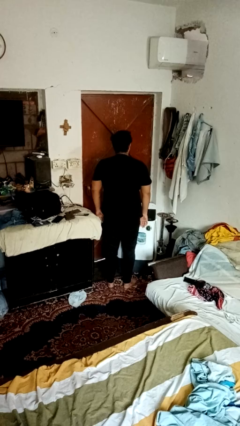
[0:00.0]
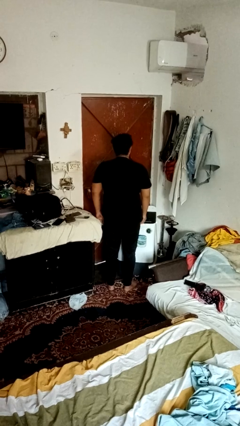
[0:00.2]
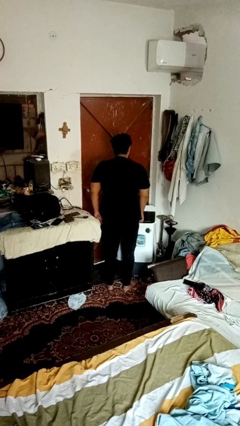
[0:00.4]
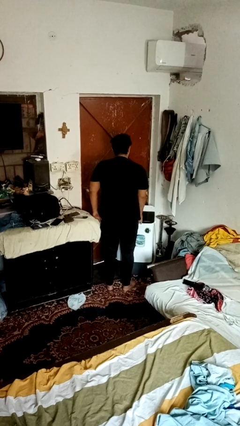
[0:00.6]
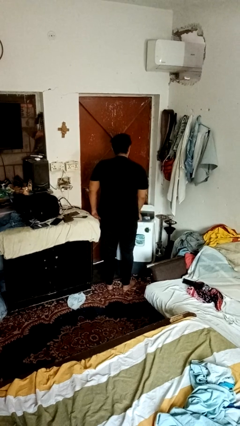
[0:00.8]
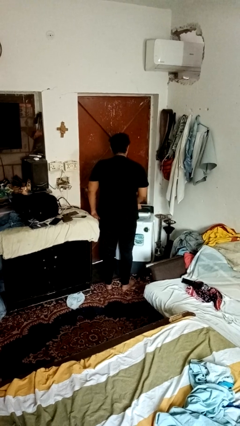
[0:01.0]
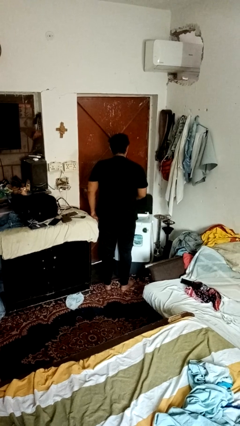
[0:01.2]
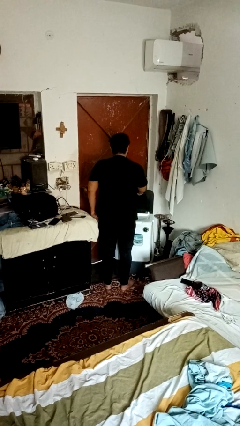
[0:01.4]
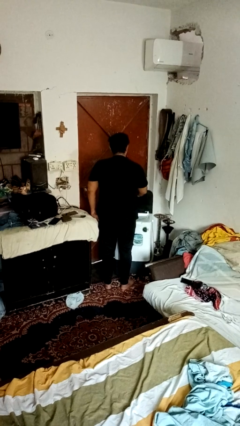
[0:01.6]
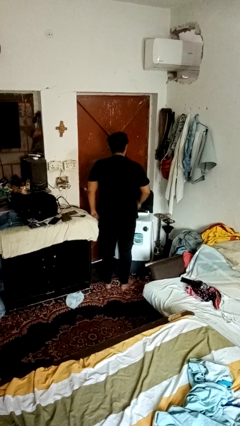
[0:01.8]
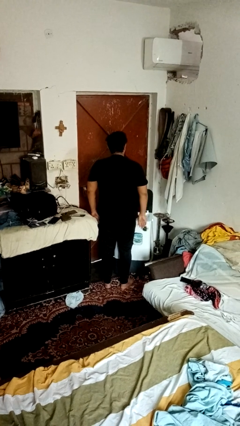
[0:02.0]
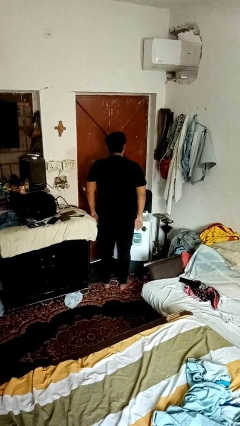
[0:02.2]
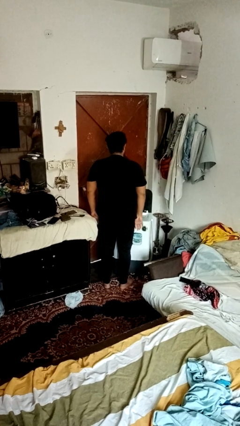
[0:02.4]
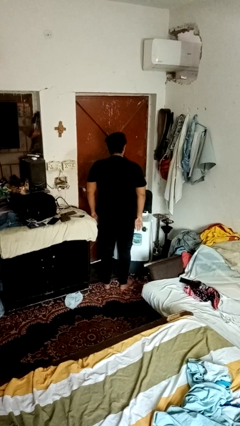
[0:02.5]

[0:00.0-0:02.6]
person opens clothes washer

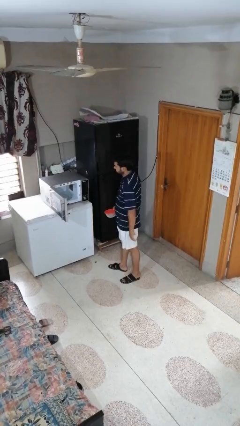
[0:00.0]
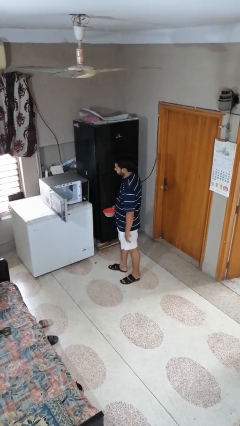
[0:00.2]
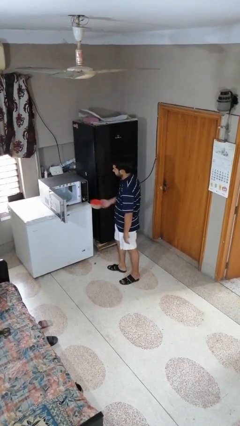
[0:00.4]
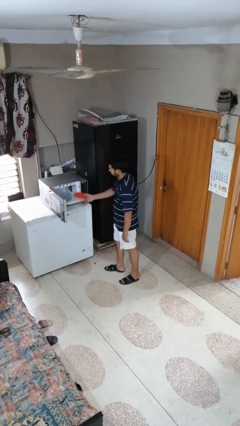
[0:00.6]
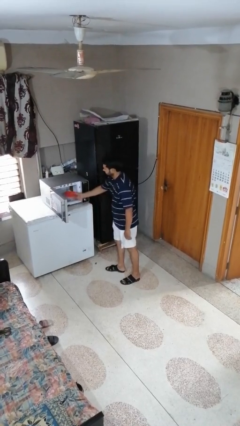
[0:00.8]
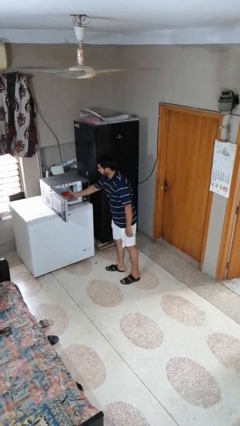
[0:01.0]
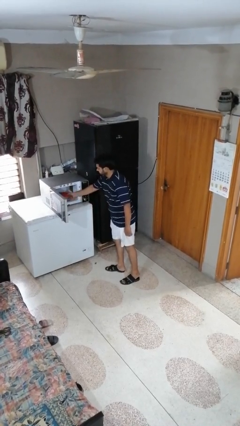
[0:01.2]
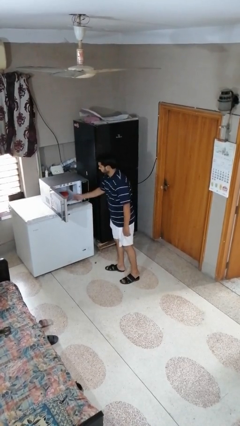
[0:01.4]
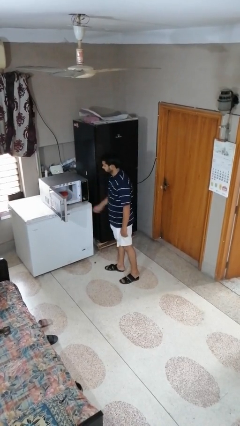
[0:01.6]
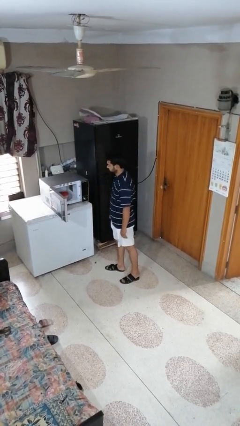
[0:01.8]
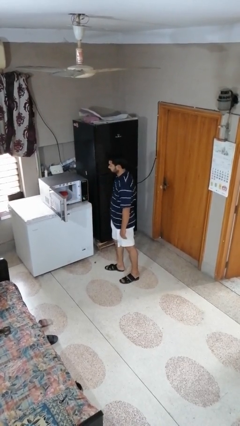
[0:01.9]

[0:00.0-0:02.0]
person puts object into microwave

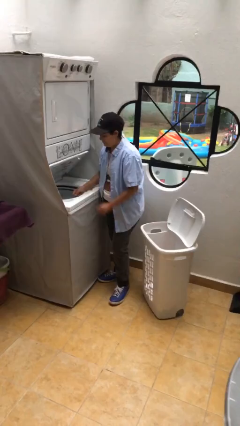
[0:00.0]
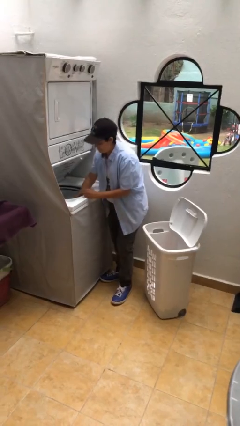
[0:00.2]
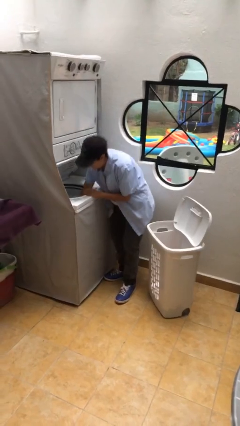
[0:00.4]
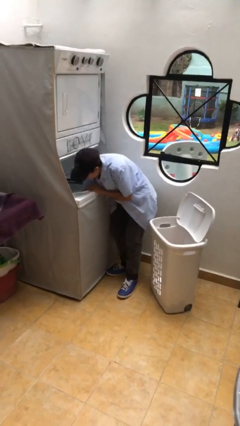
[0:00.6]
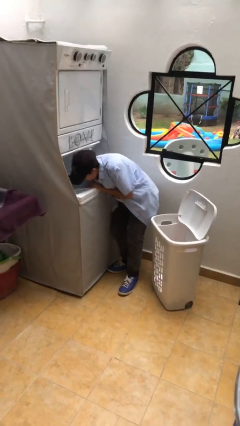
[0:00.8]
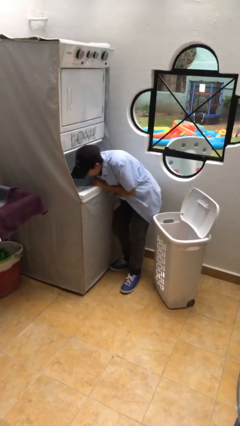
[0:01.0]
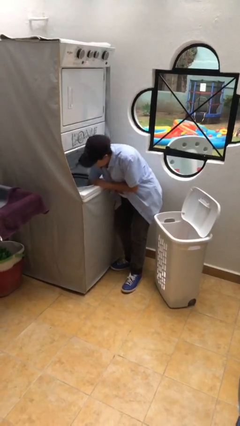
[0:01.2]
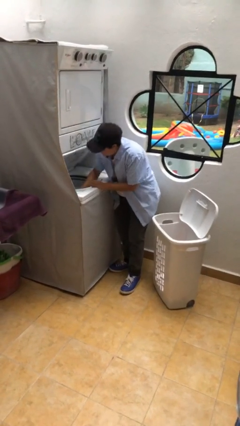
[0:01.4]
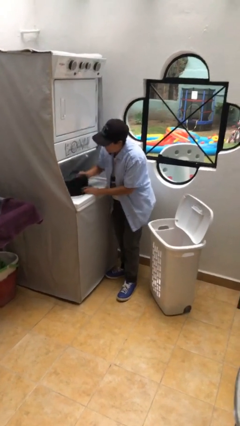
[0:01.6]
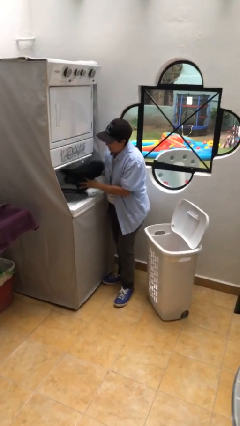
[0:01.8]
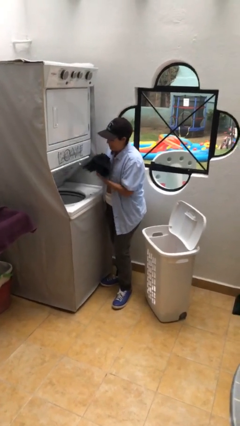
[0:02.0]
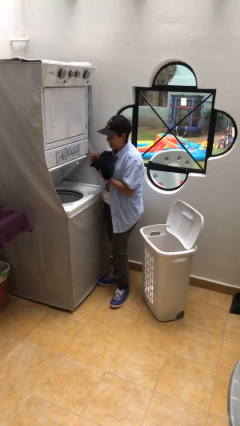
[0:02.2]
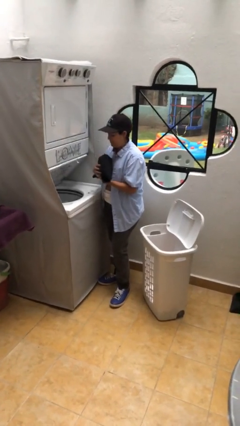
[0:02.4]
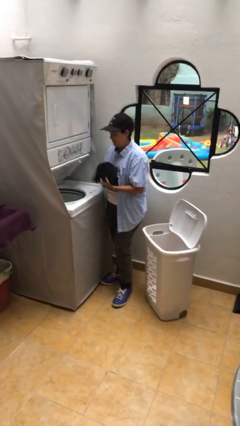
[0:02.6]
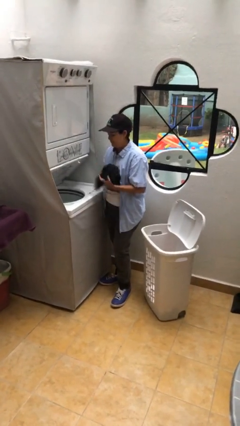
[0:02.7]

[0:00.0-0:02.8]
person unloads clotheswasher

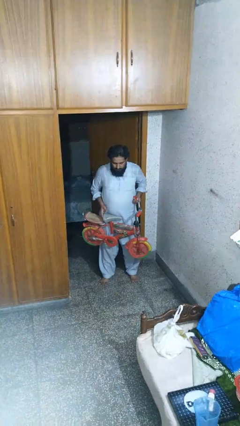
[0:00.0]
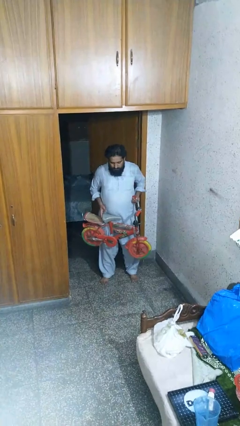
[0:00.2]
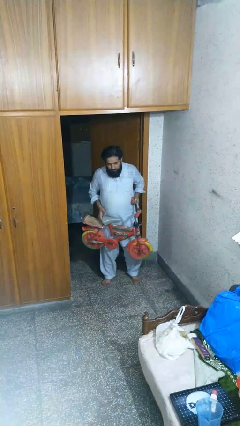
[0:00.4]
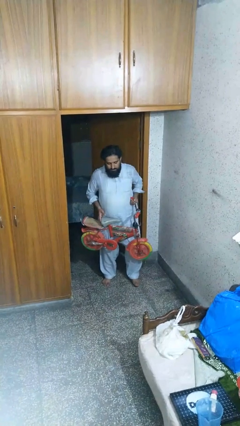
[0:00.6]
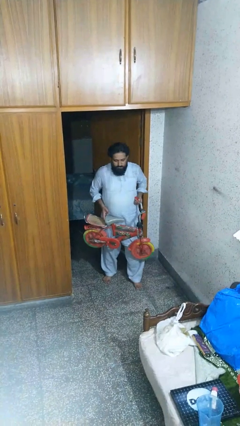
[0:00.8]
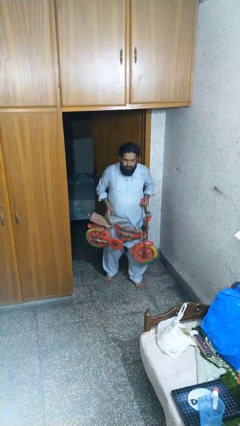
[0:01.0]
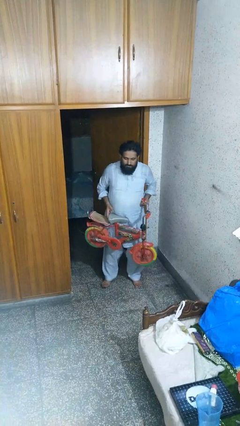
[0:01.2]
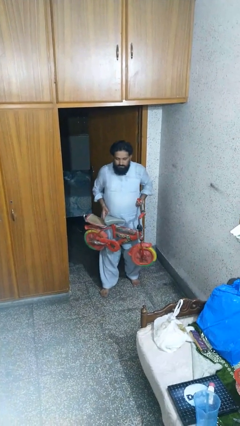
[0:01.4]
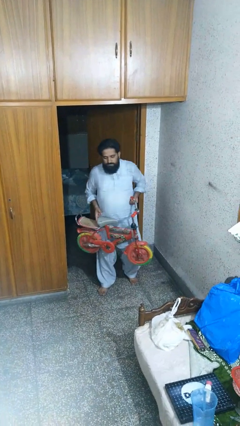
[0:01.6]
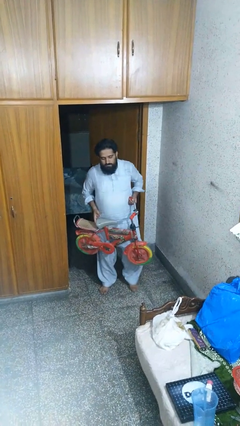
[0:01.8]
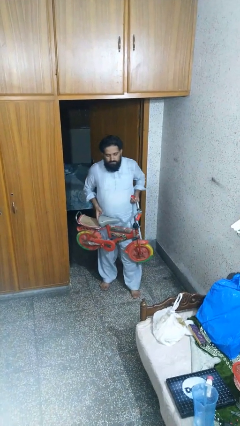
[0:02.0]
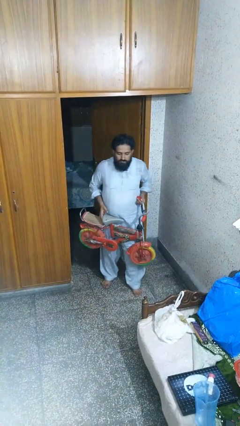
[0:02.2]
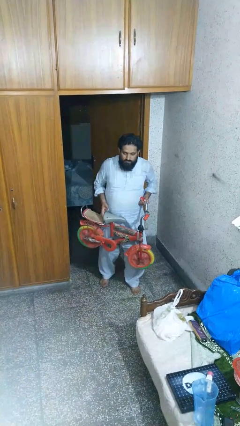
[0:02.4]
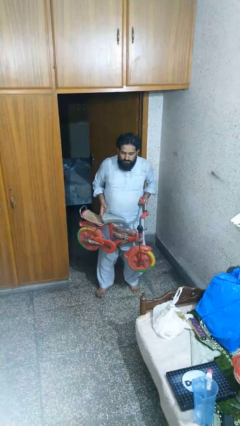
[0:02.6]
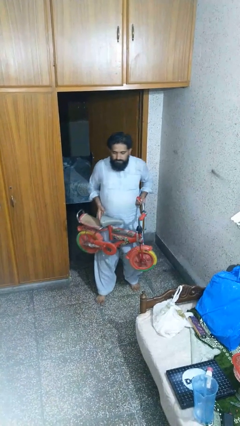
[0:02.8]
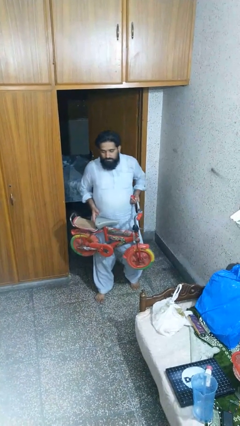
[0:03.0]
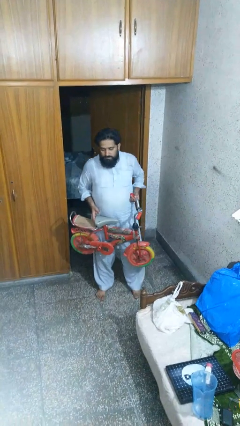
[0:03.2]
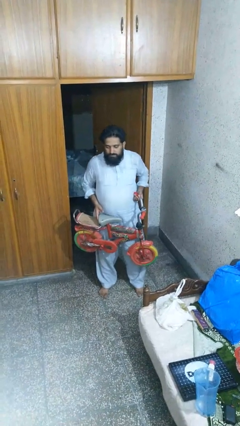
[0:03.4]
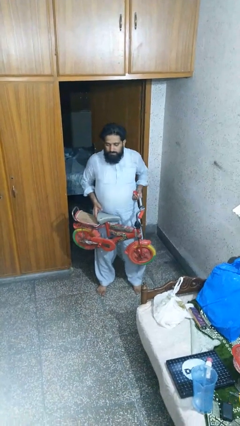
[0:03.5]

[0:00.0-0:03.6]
person carries bicycle

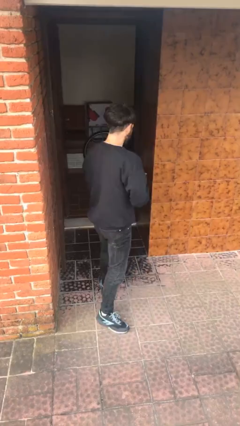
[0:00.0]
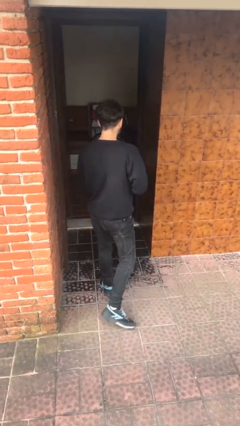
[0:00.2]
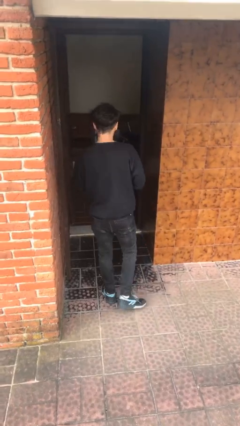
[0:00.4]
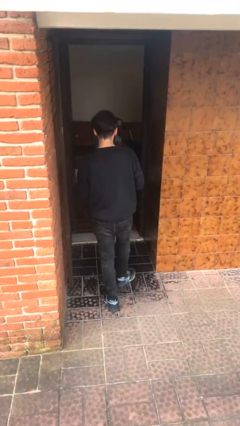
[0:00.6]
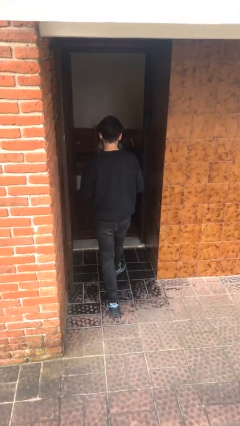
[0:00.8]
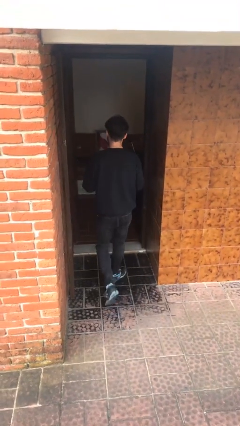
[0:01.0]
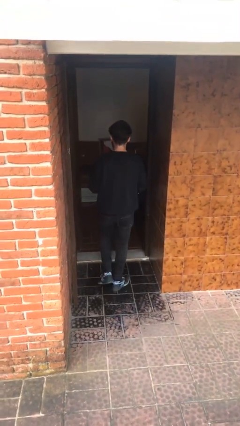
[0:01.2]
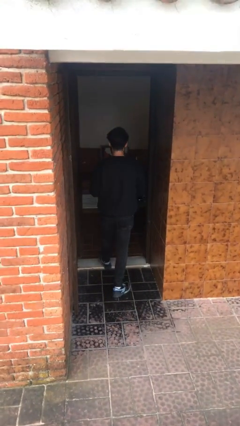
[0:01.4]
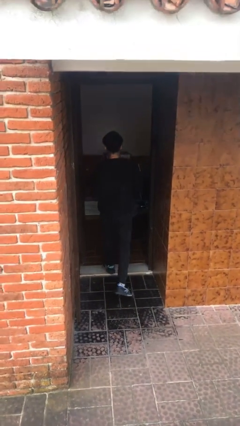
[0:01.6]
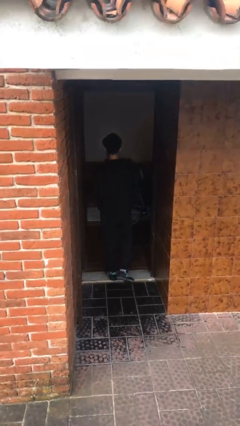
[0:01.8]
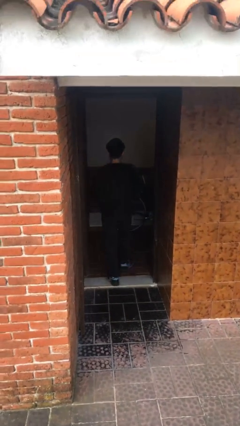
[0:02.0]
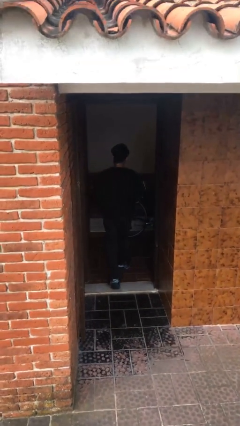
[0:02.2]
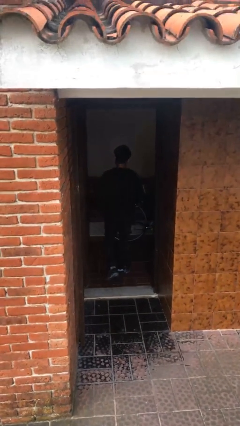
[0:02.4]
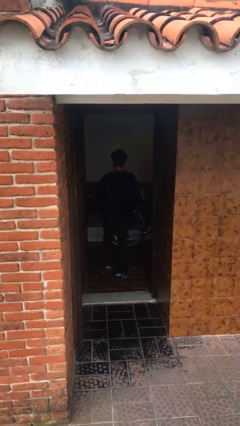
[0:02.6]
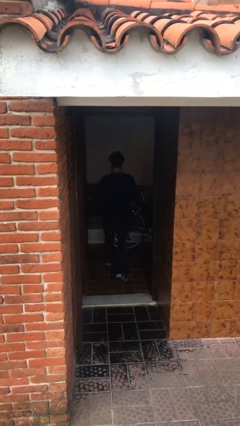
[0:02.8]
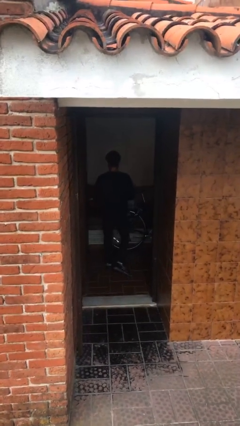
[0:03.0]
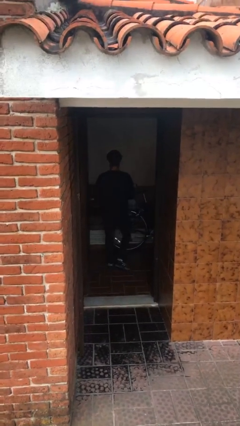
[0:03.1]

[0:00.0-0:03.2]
person exits scene through structure

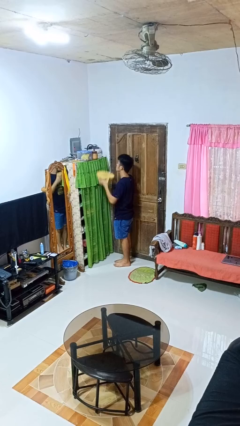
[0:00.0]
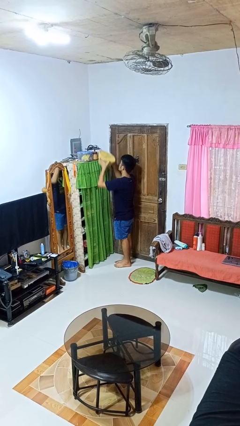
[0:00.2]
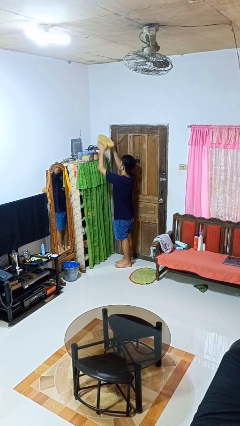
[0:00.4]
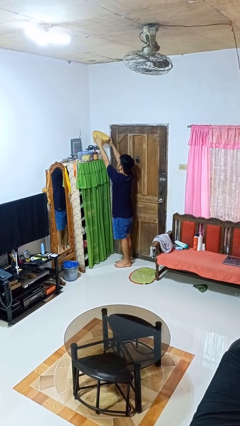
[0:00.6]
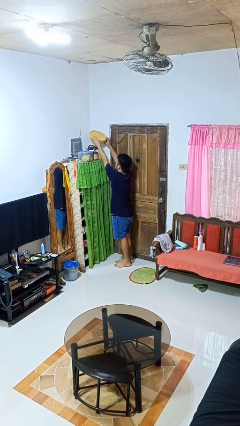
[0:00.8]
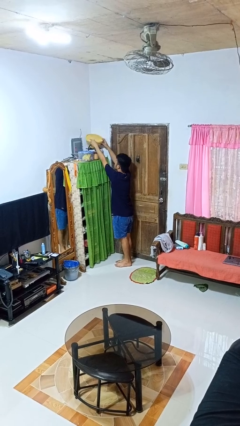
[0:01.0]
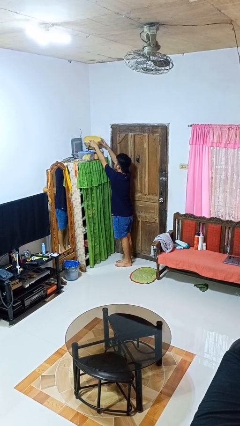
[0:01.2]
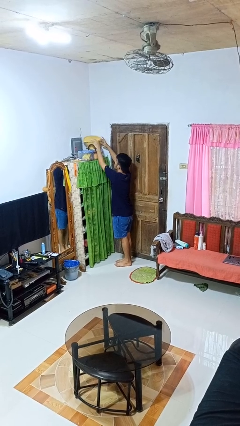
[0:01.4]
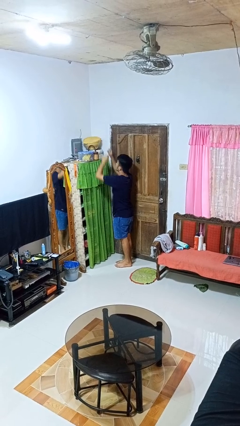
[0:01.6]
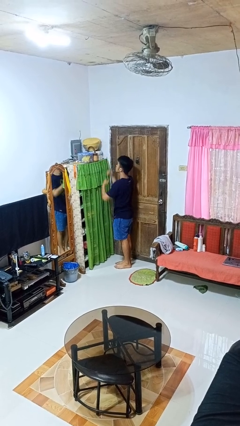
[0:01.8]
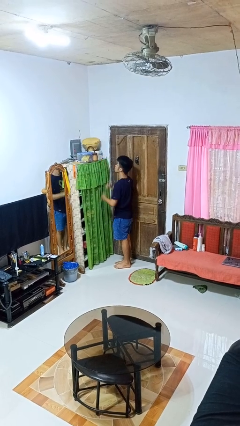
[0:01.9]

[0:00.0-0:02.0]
person puts down object on shelf

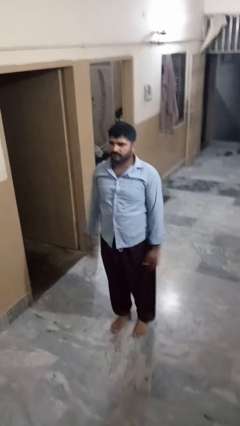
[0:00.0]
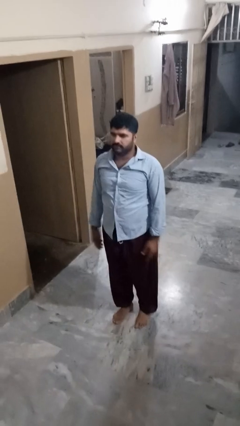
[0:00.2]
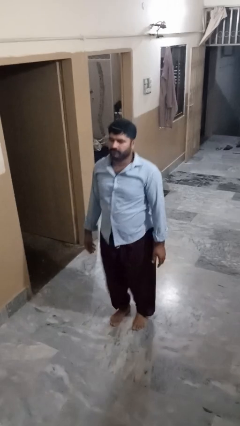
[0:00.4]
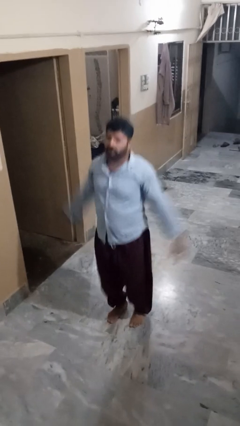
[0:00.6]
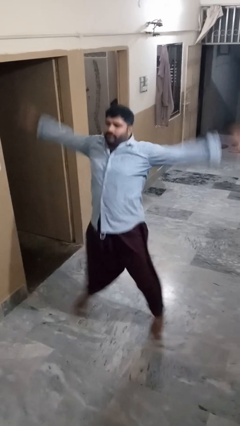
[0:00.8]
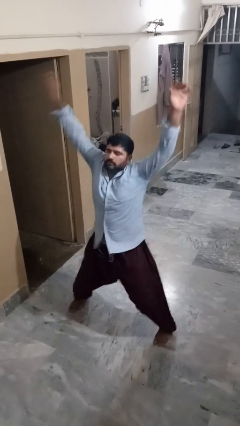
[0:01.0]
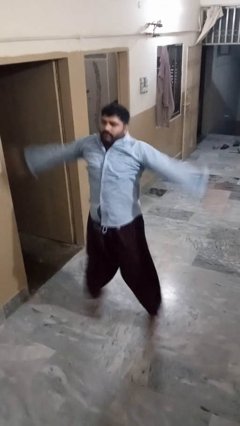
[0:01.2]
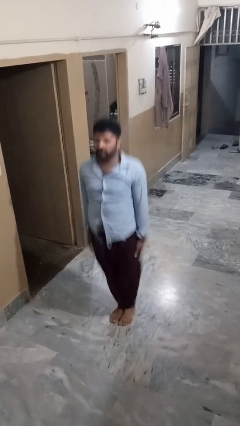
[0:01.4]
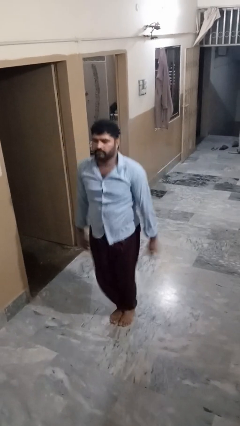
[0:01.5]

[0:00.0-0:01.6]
person exercises with jumping jacks
